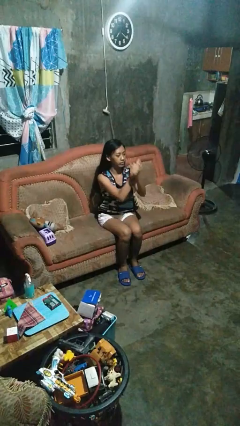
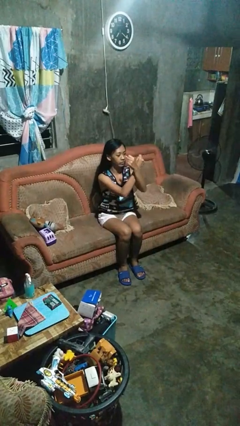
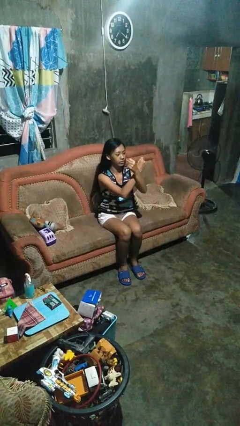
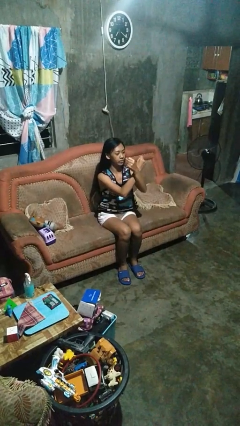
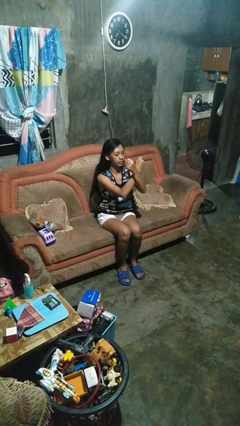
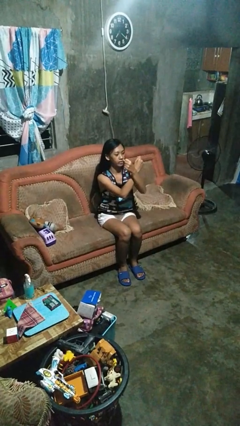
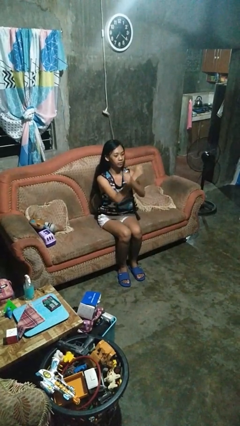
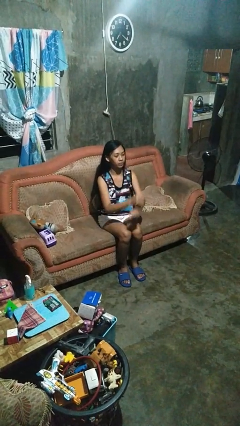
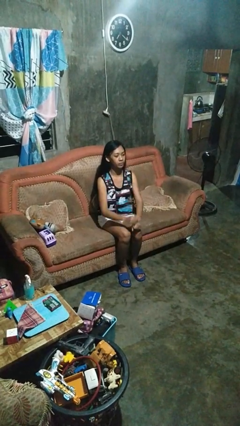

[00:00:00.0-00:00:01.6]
person gestures arms x

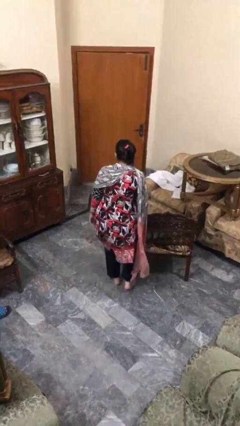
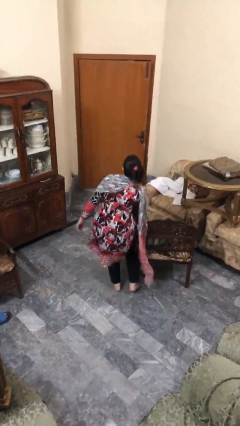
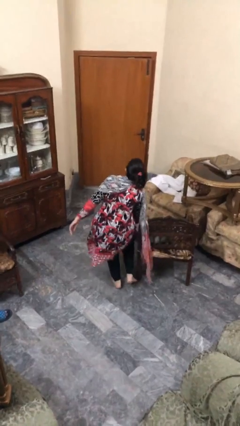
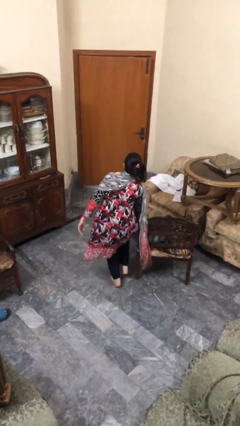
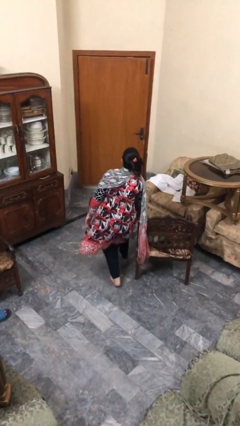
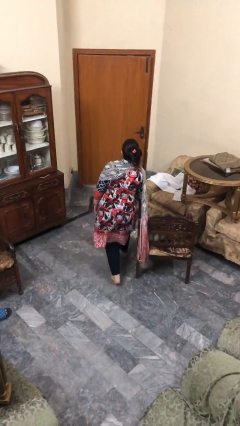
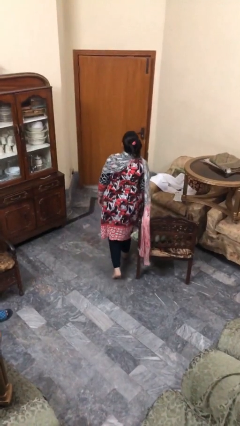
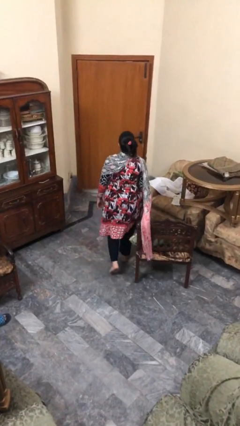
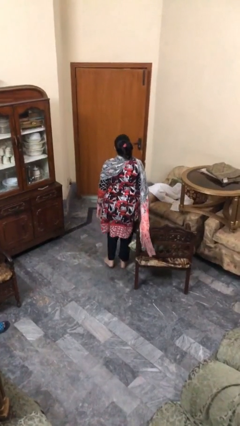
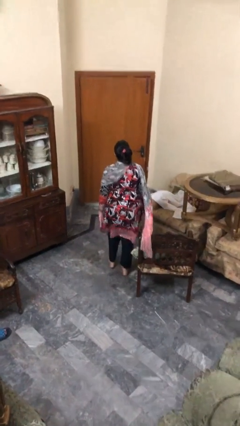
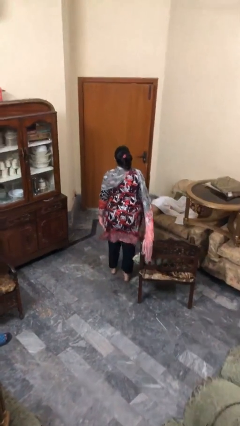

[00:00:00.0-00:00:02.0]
person stubs toe

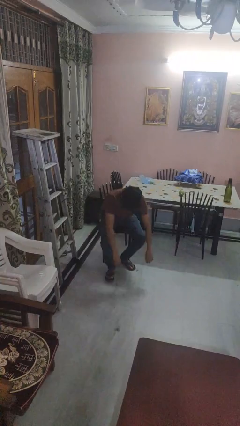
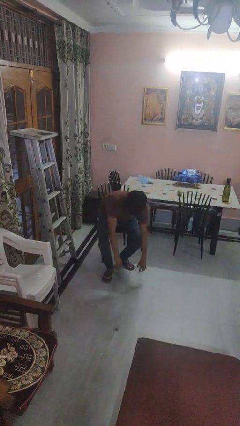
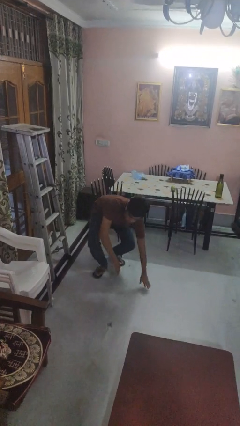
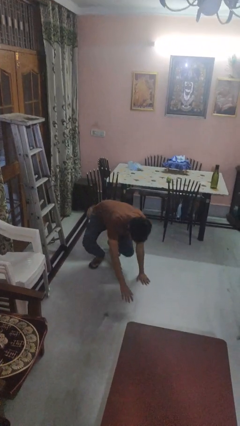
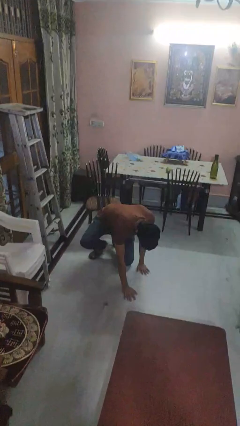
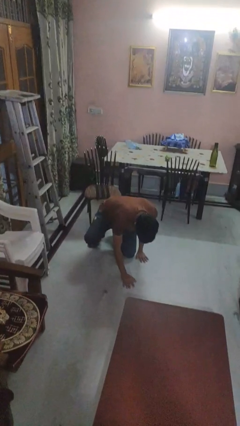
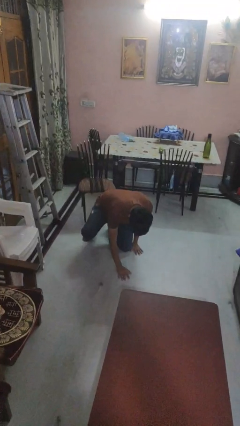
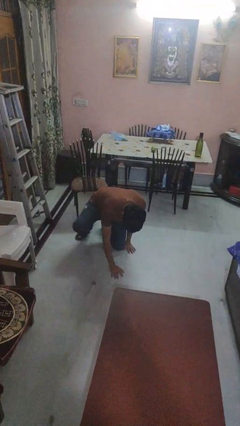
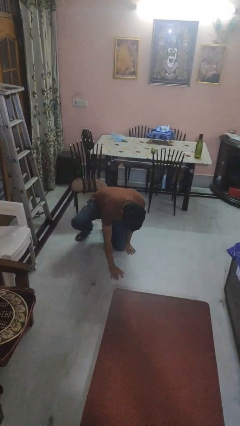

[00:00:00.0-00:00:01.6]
person falls while standing

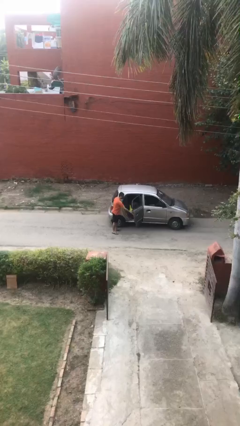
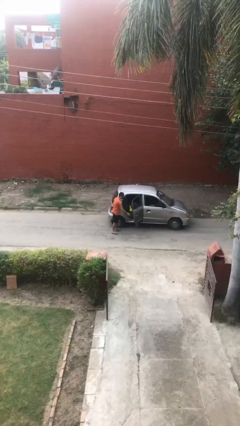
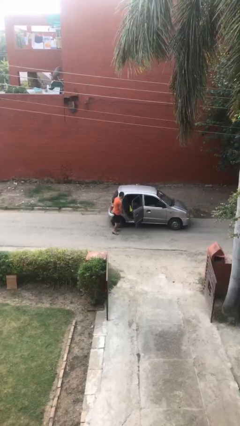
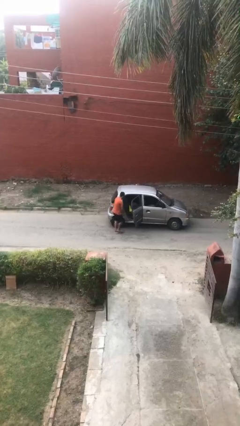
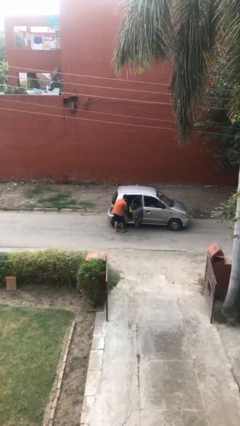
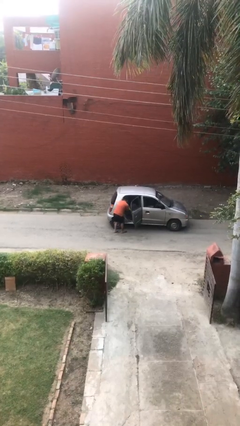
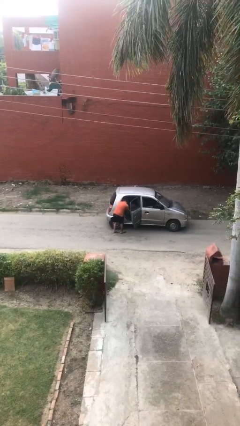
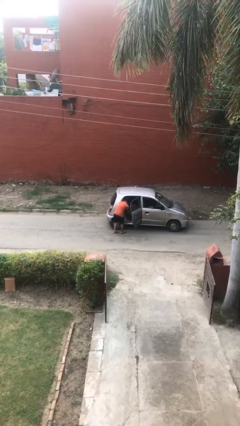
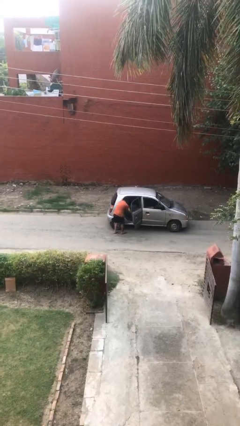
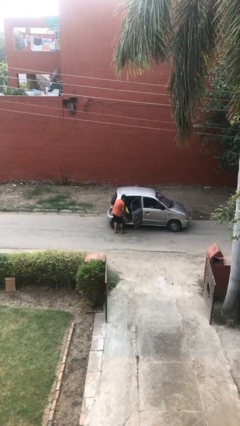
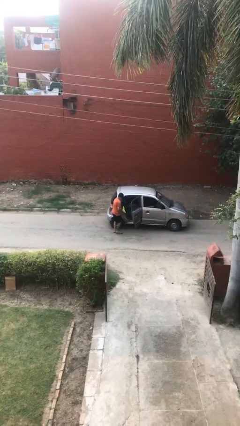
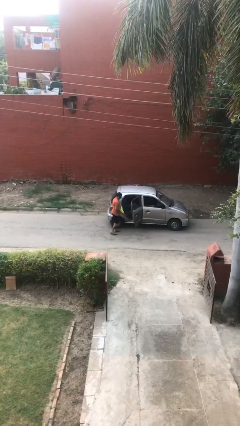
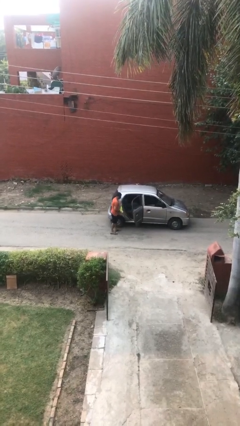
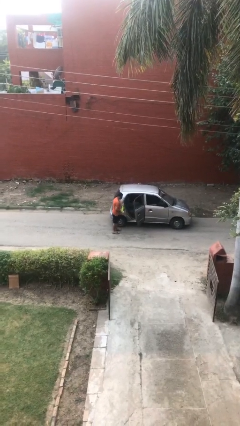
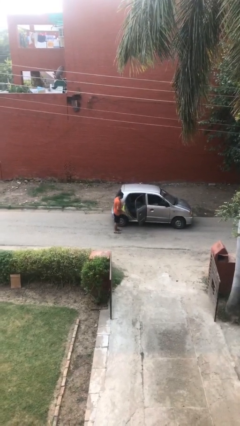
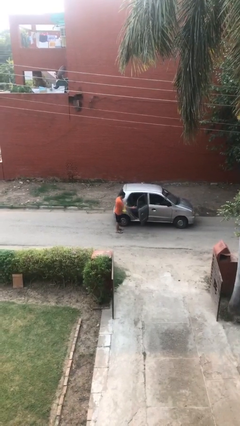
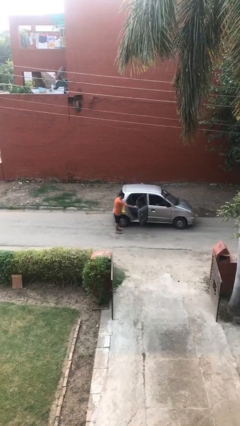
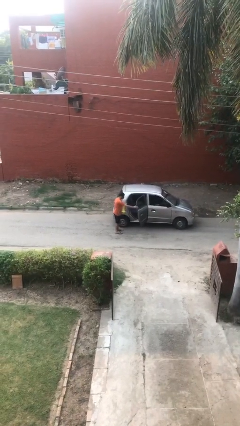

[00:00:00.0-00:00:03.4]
person unloads car

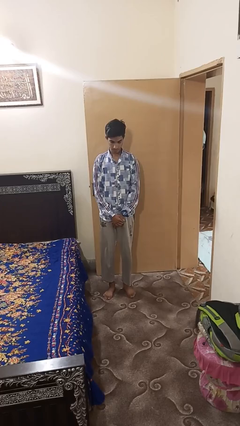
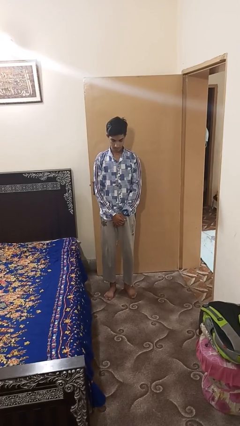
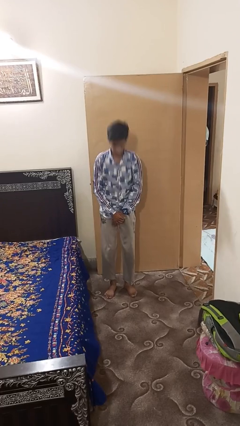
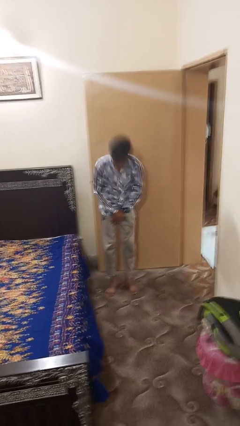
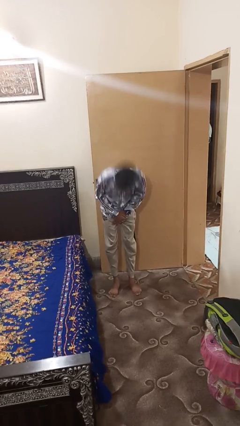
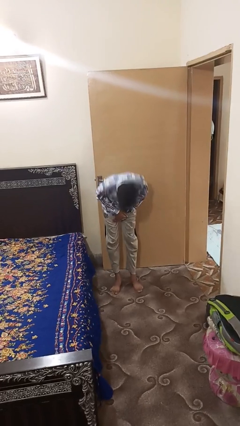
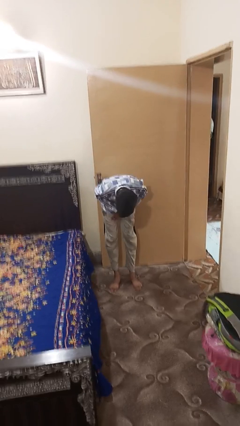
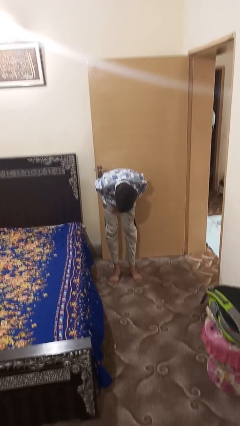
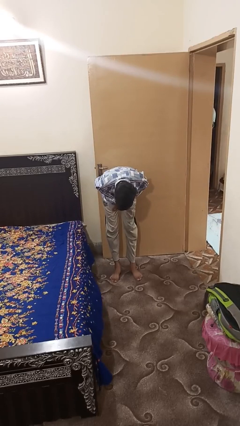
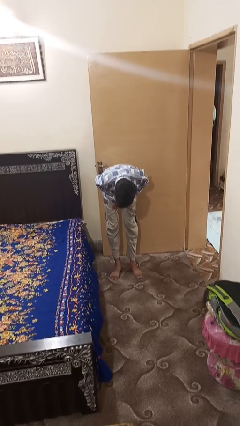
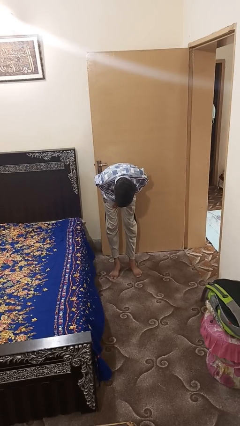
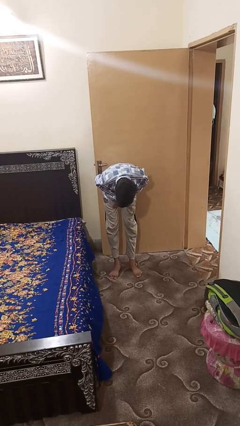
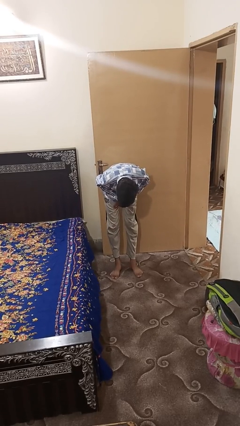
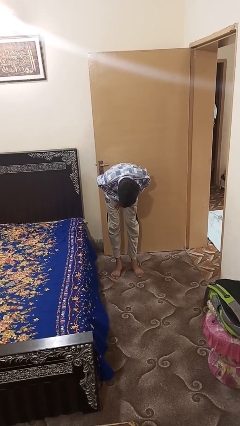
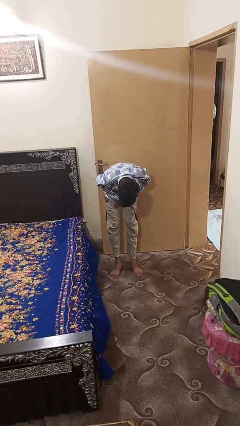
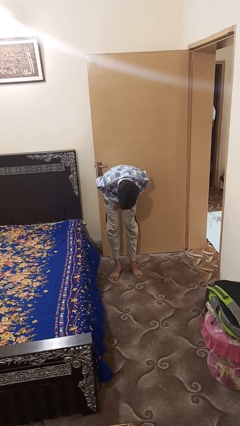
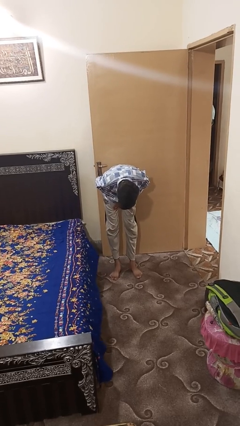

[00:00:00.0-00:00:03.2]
person bows

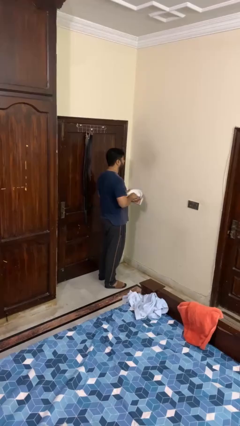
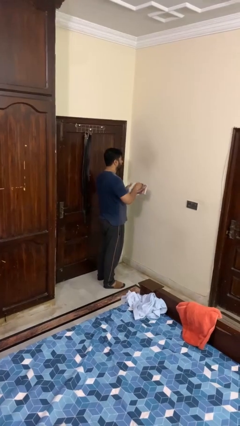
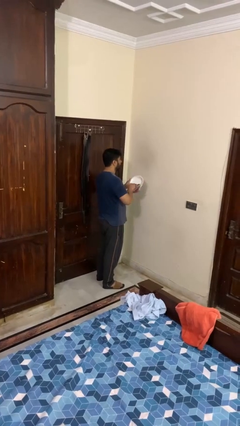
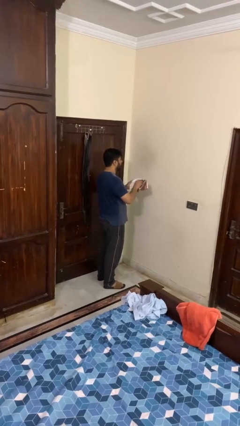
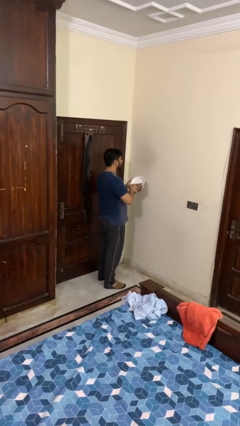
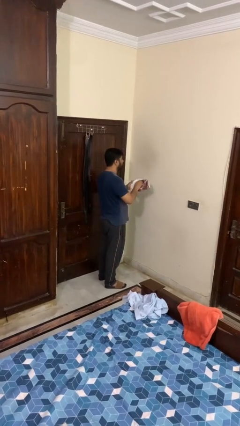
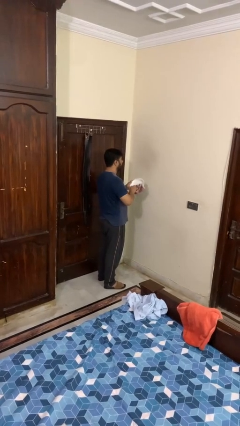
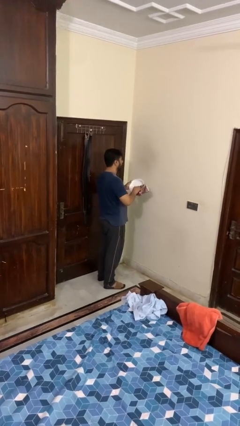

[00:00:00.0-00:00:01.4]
person dries dish

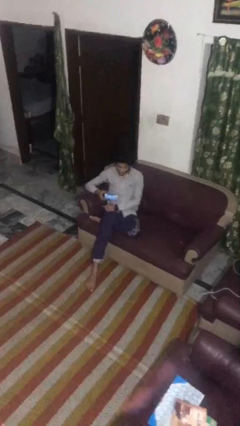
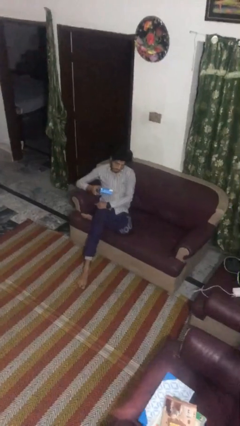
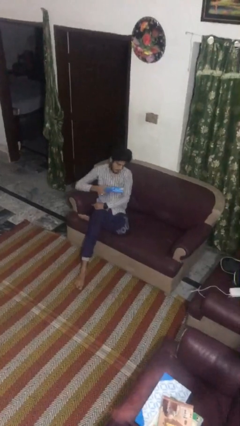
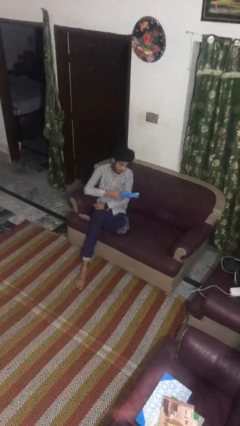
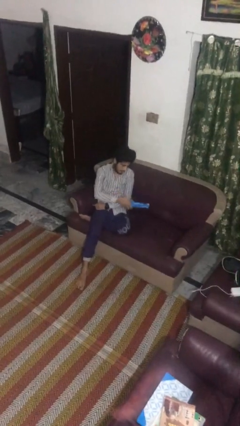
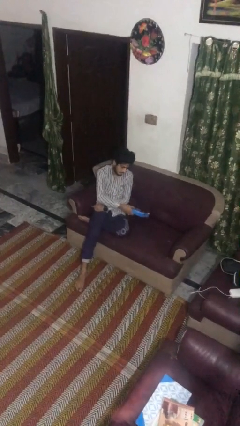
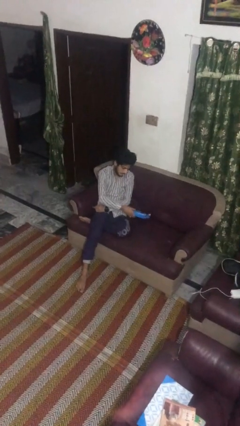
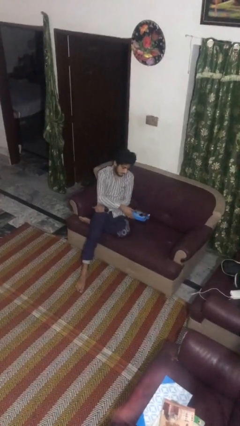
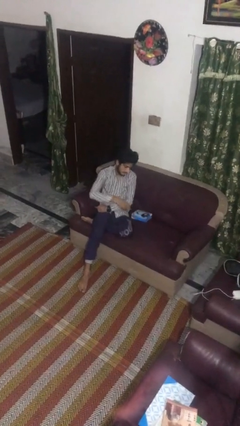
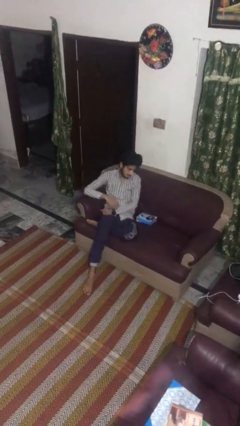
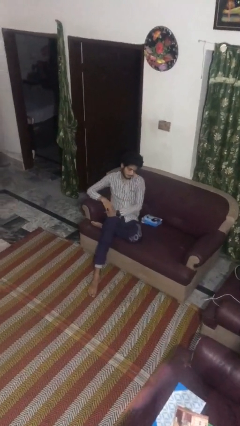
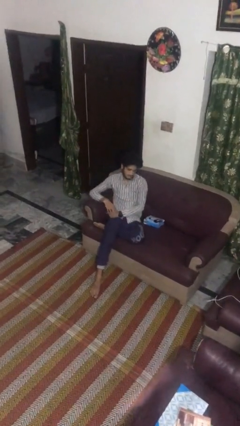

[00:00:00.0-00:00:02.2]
person puts down object on couch

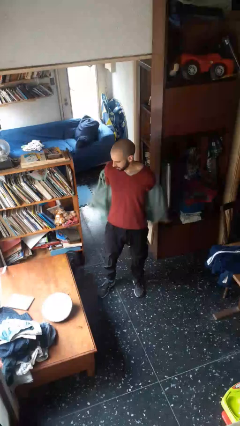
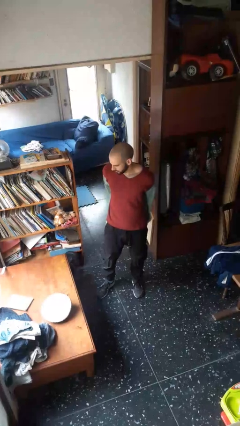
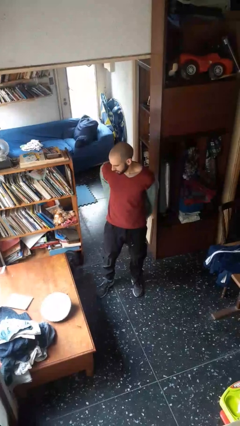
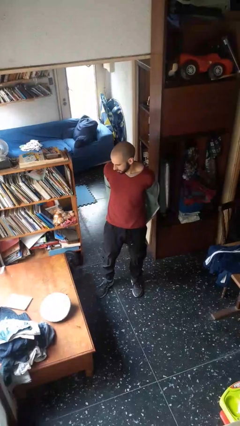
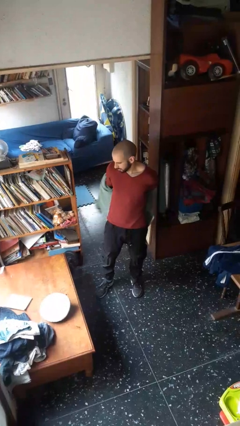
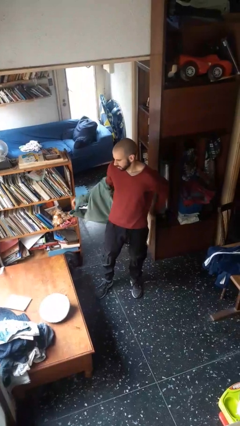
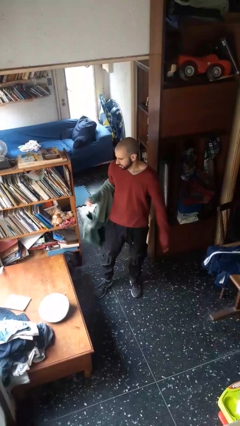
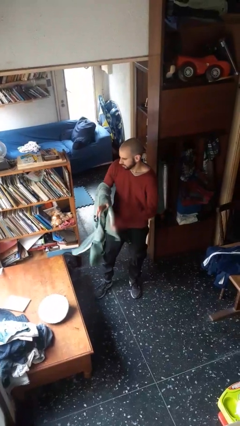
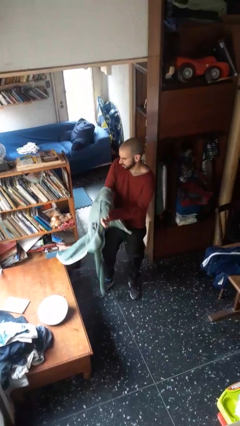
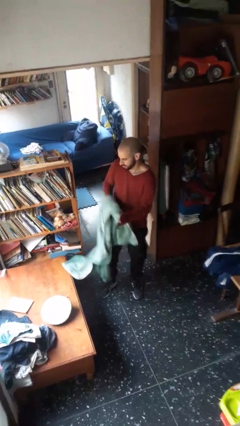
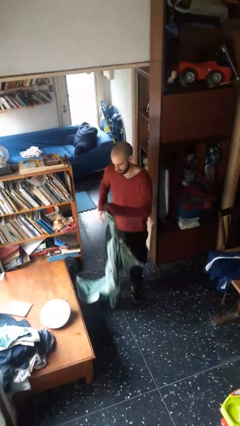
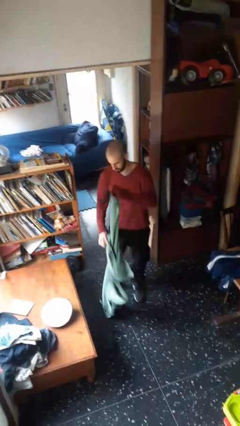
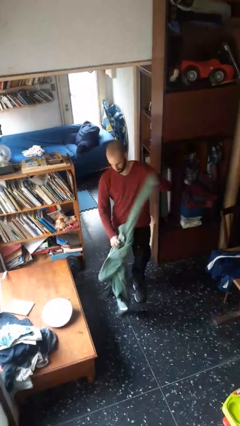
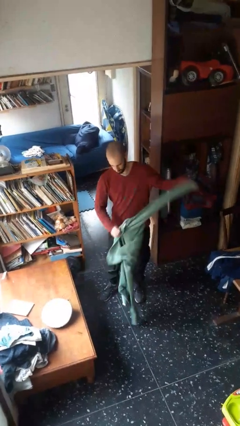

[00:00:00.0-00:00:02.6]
person takes off jacket
